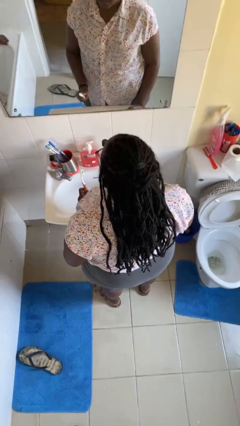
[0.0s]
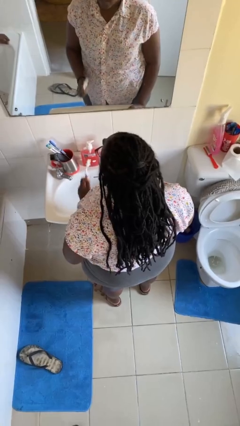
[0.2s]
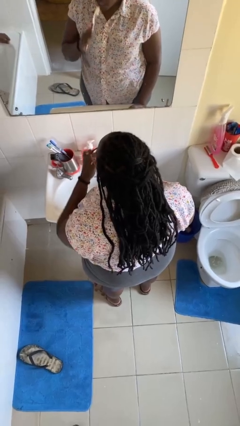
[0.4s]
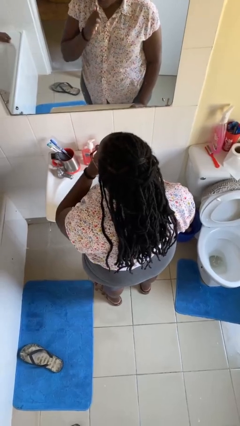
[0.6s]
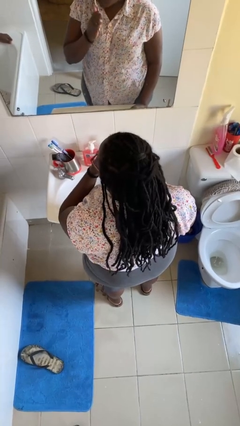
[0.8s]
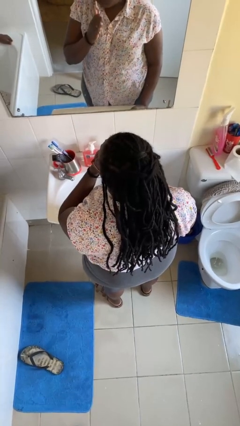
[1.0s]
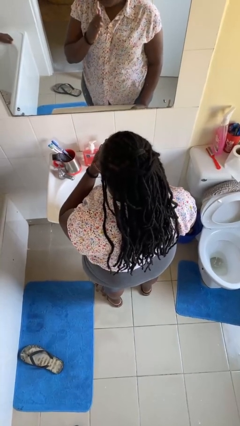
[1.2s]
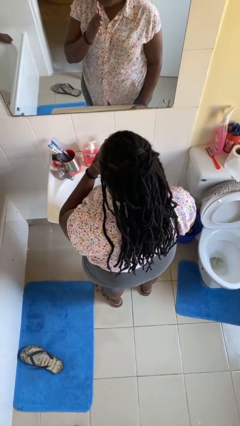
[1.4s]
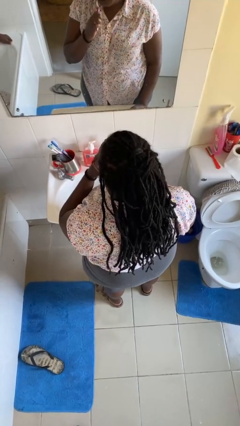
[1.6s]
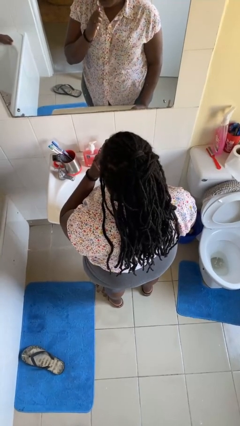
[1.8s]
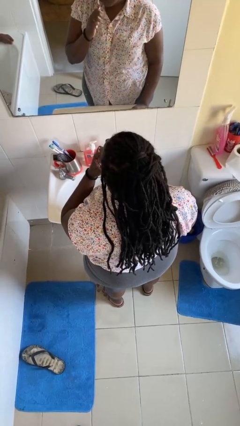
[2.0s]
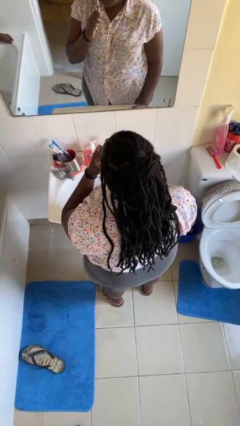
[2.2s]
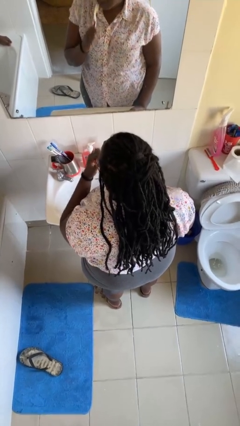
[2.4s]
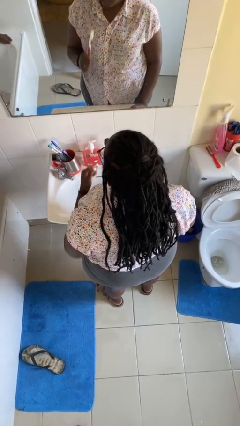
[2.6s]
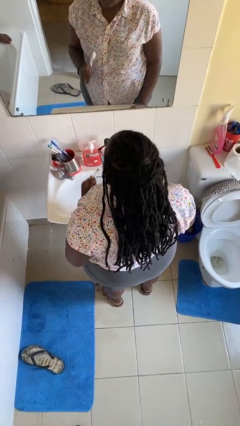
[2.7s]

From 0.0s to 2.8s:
person brushes teeth

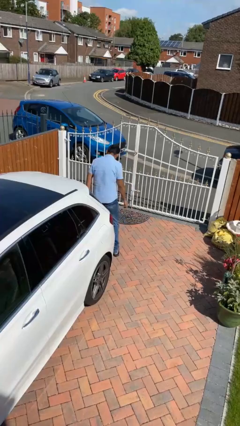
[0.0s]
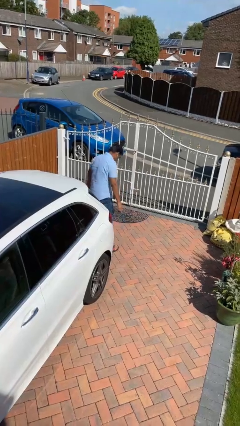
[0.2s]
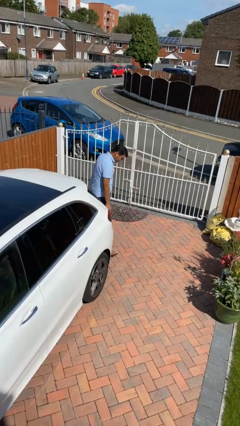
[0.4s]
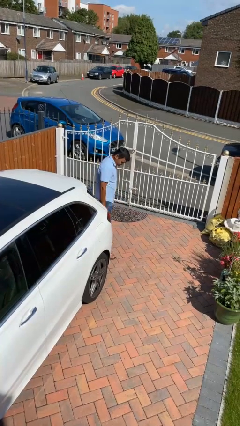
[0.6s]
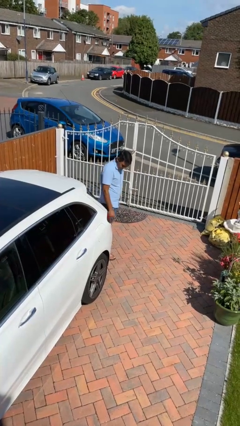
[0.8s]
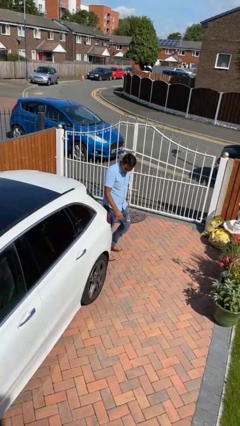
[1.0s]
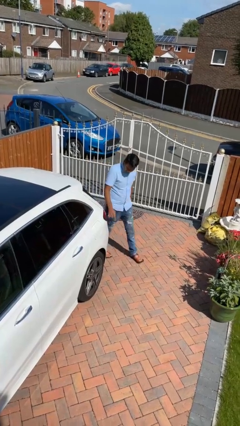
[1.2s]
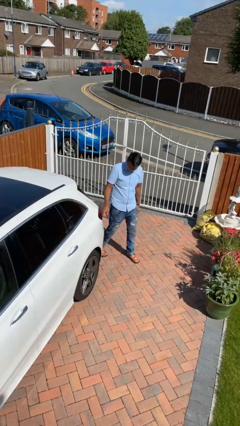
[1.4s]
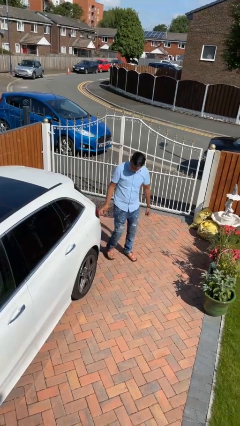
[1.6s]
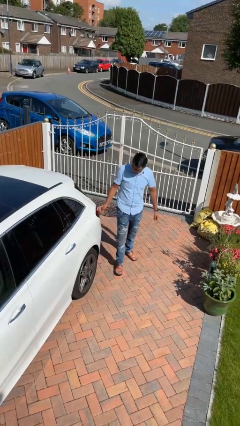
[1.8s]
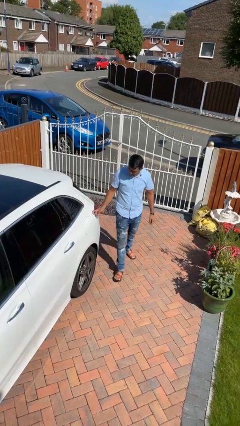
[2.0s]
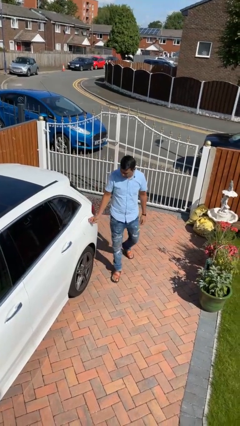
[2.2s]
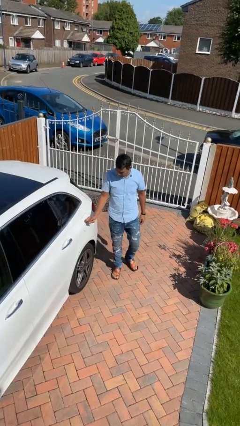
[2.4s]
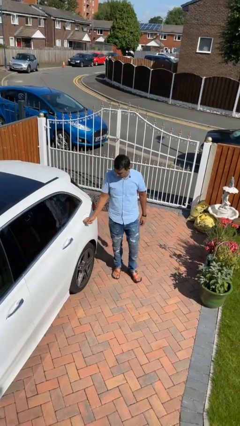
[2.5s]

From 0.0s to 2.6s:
person walks around car

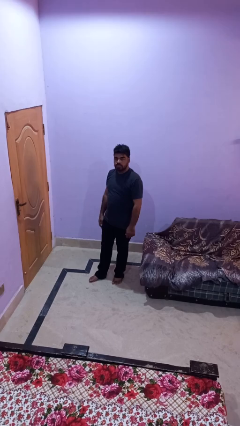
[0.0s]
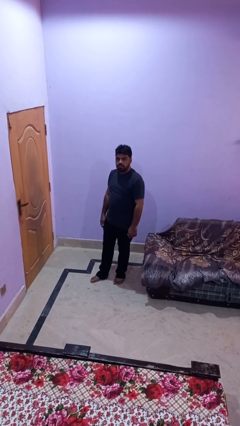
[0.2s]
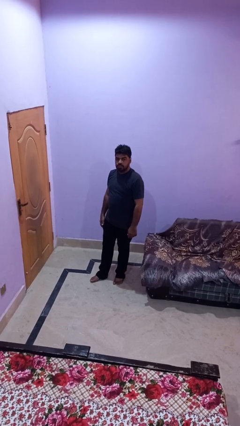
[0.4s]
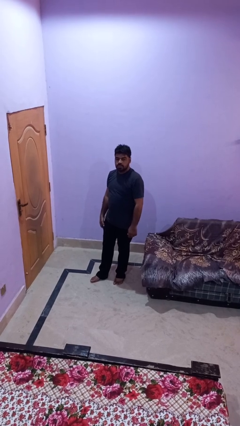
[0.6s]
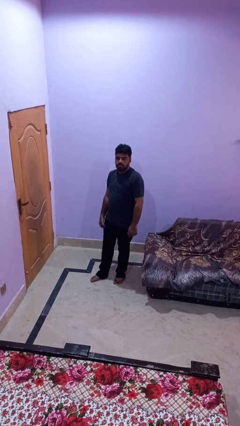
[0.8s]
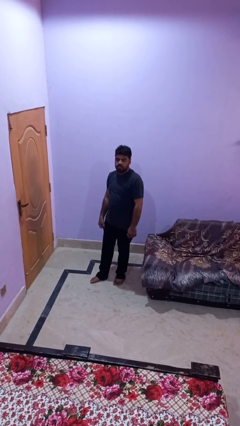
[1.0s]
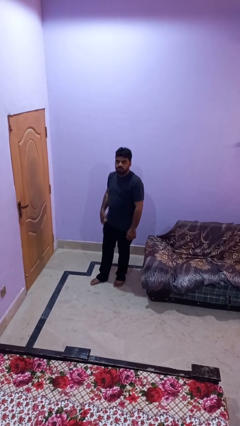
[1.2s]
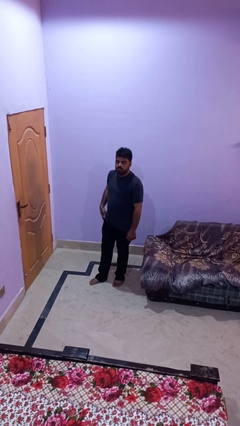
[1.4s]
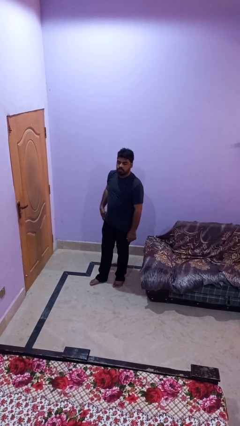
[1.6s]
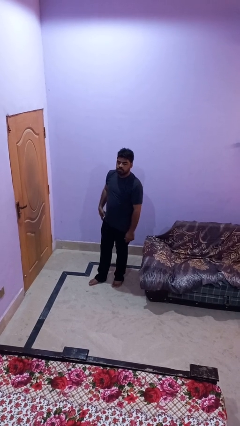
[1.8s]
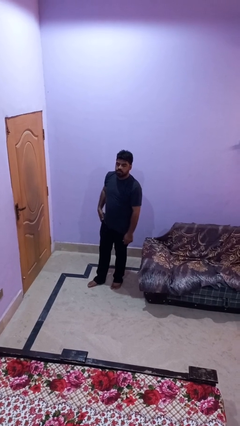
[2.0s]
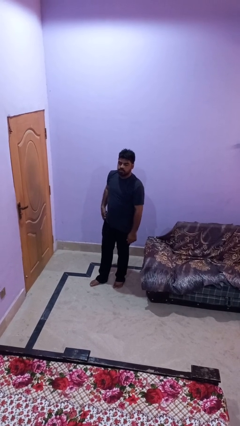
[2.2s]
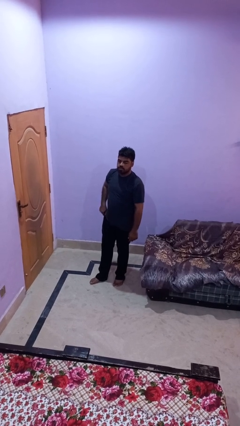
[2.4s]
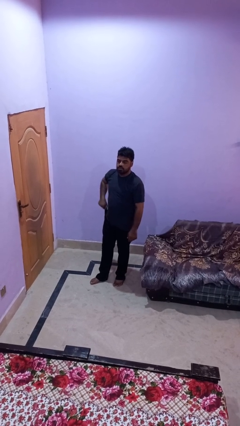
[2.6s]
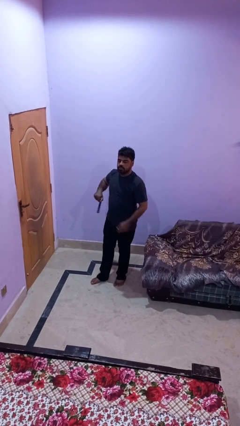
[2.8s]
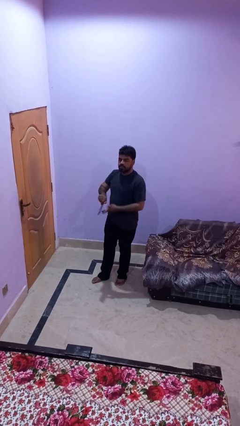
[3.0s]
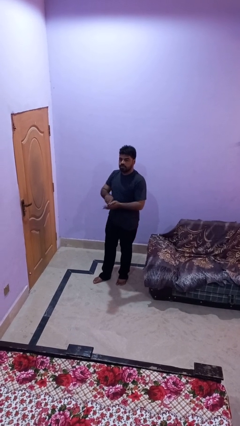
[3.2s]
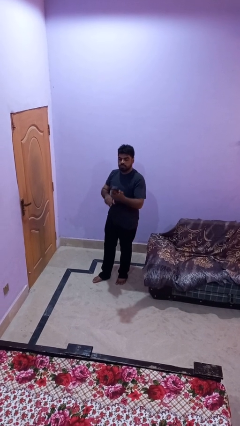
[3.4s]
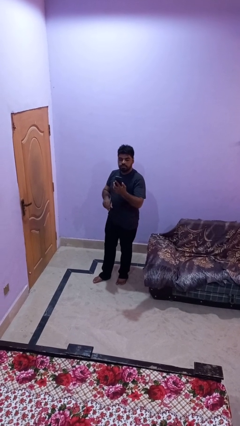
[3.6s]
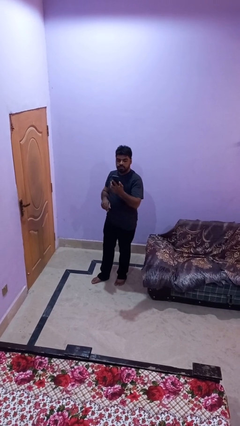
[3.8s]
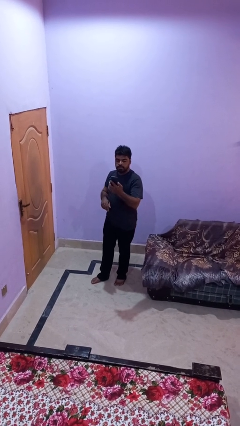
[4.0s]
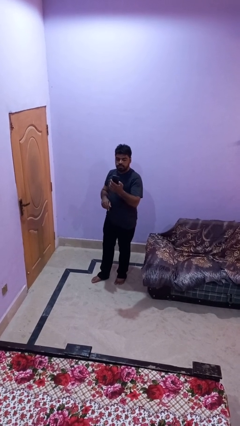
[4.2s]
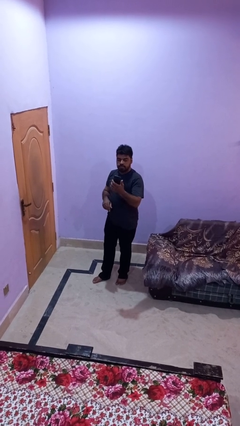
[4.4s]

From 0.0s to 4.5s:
person takes phone from pocket

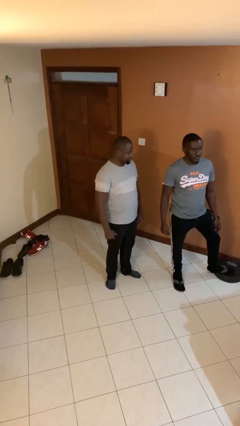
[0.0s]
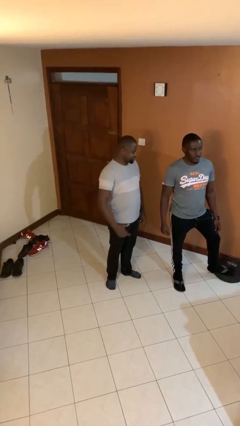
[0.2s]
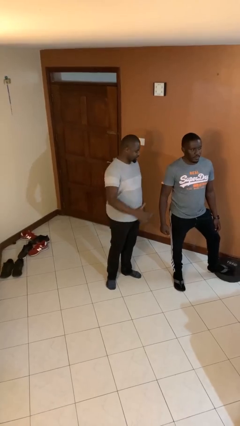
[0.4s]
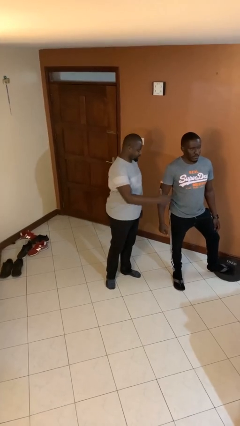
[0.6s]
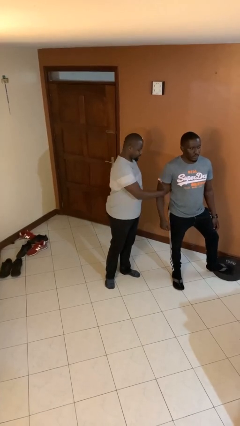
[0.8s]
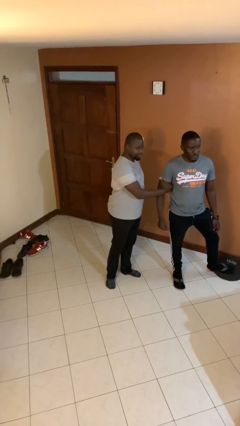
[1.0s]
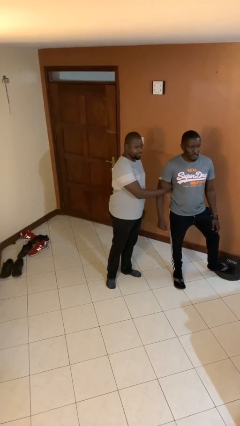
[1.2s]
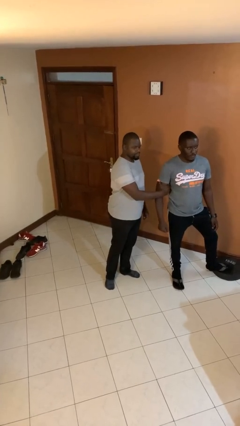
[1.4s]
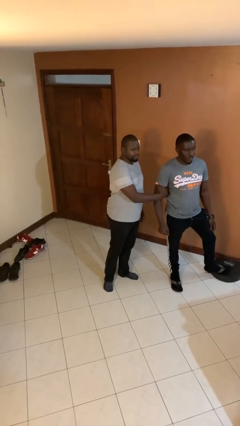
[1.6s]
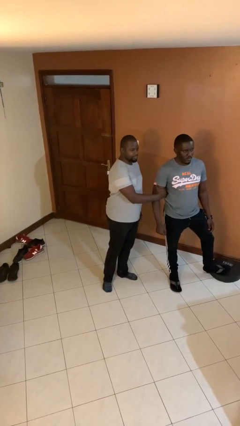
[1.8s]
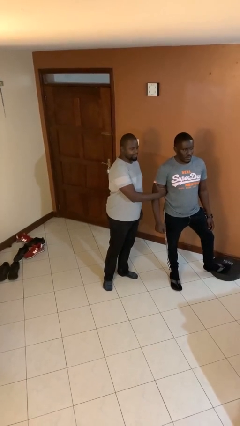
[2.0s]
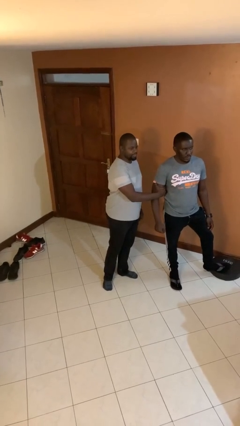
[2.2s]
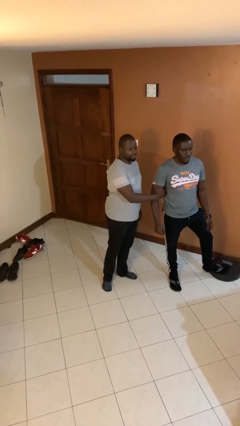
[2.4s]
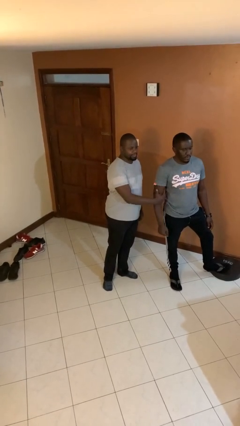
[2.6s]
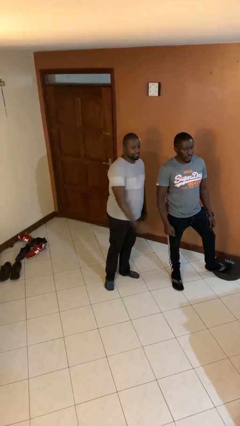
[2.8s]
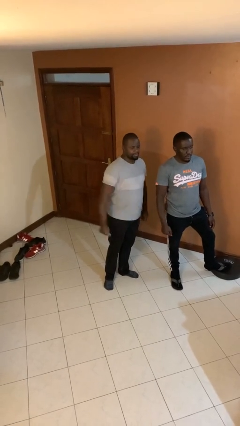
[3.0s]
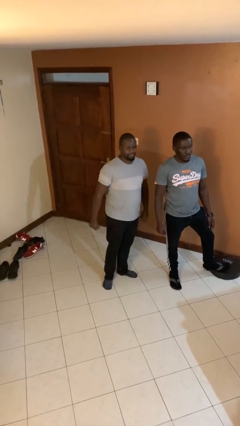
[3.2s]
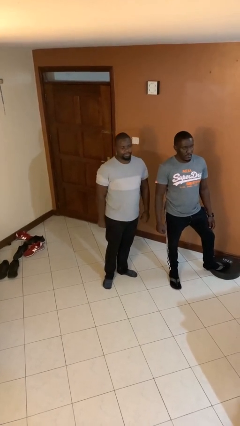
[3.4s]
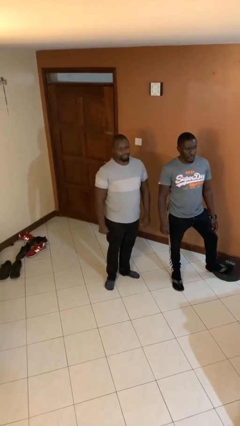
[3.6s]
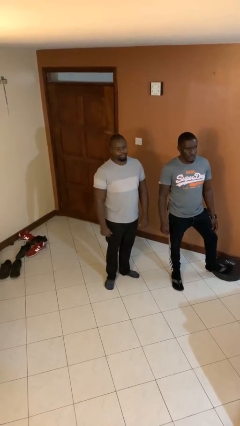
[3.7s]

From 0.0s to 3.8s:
person grabs person by bicep

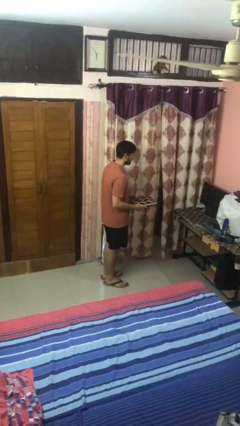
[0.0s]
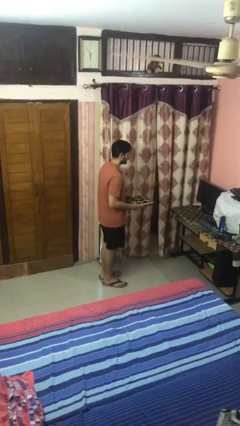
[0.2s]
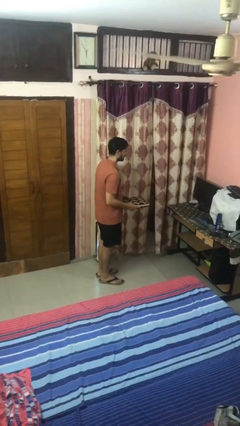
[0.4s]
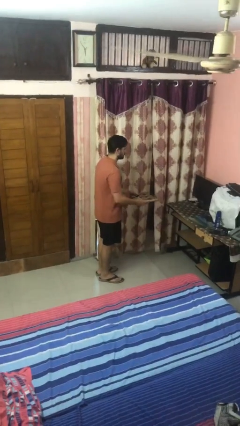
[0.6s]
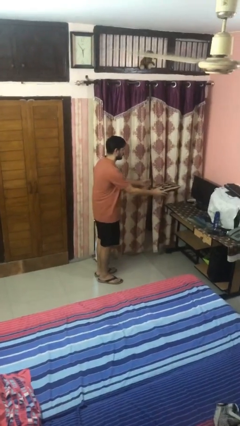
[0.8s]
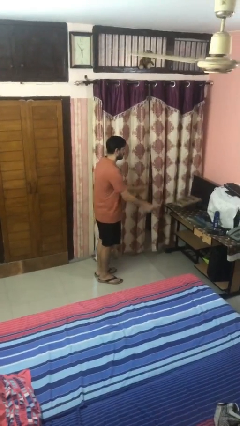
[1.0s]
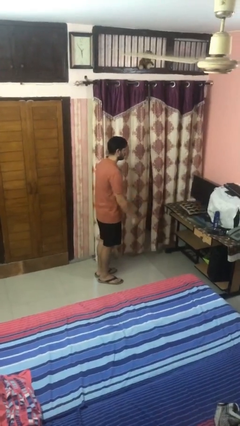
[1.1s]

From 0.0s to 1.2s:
person throws object on table

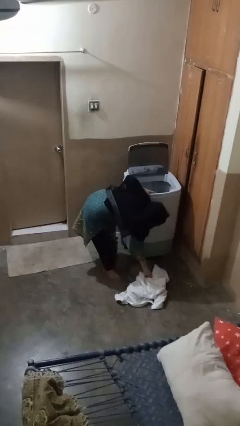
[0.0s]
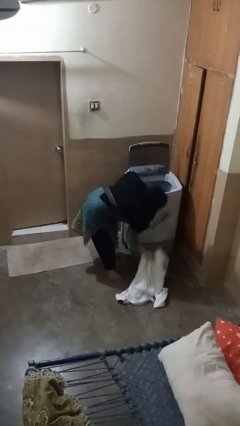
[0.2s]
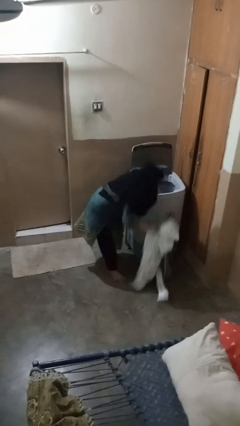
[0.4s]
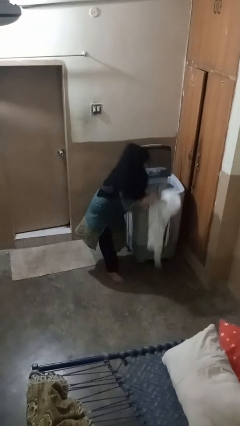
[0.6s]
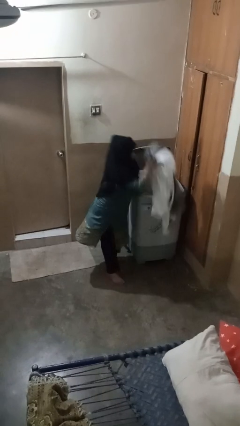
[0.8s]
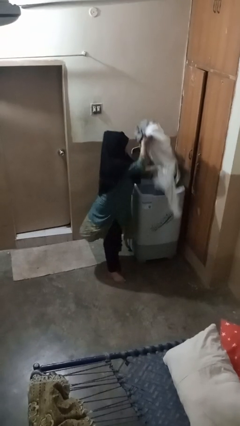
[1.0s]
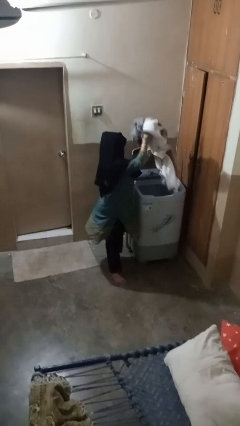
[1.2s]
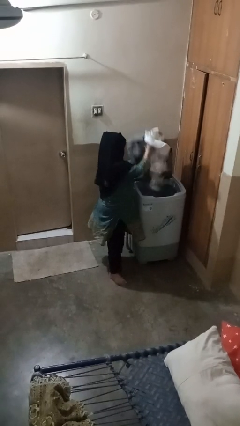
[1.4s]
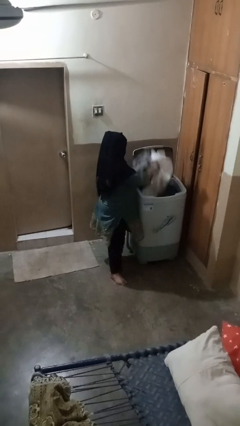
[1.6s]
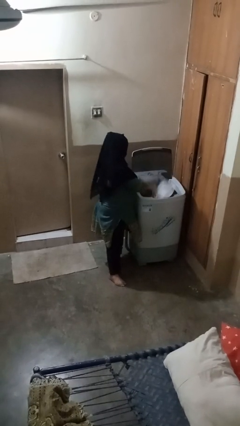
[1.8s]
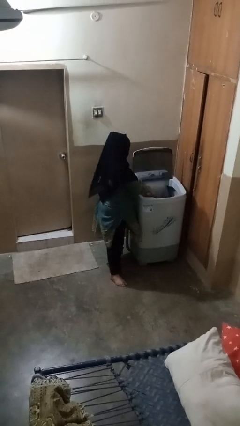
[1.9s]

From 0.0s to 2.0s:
person loads clotheswasher

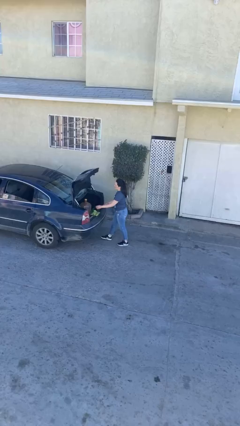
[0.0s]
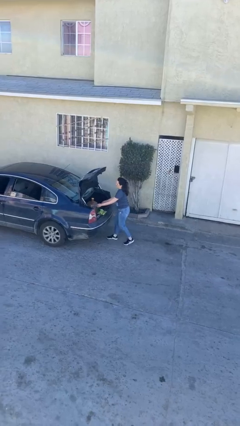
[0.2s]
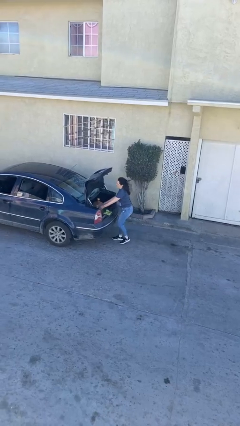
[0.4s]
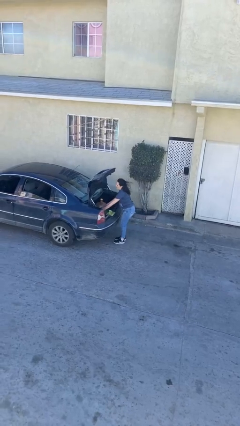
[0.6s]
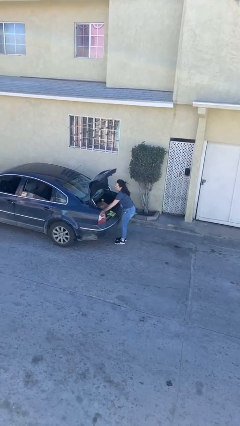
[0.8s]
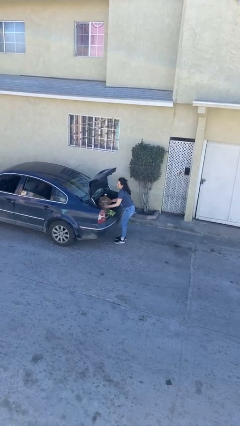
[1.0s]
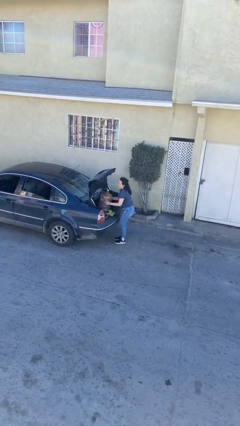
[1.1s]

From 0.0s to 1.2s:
person unloads car
